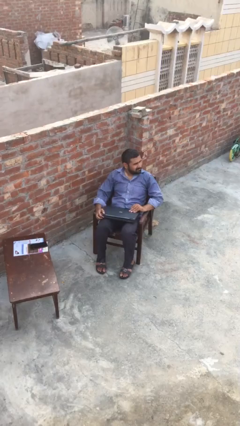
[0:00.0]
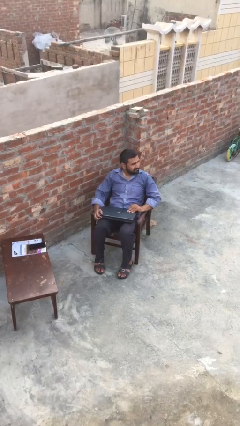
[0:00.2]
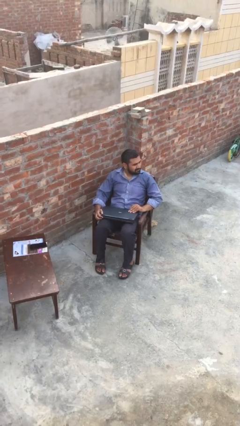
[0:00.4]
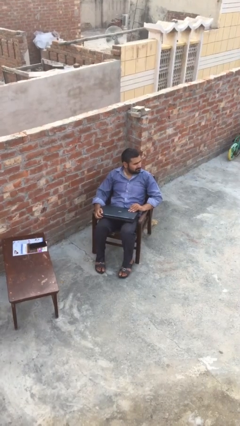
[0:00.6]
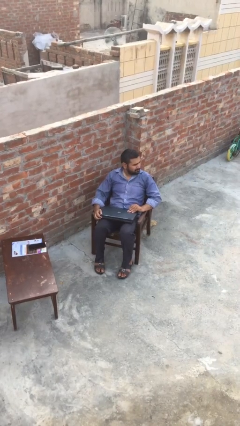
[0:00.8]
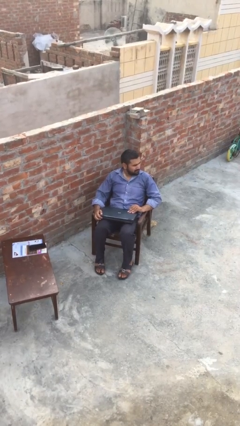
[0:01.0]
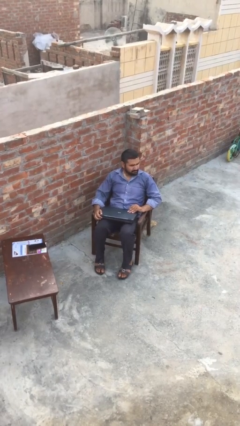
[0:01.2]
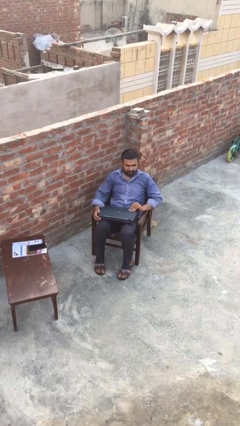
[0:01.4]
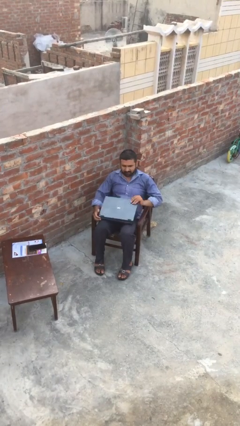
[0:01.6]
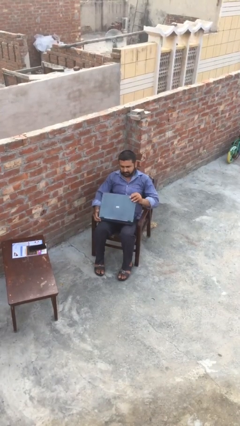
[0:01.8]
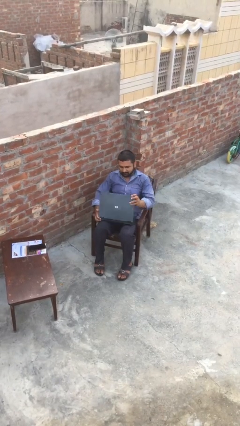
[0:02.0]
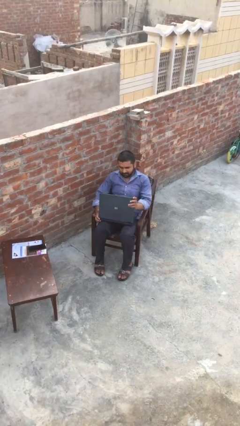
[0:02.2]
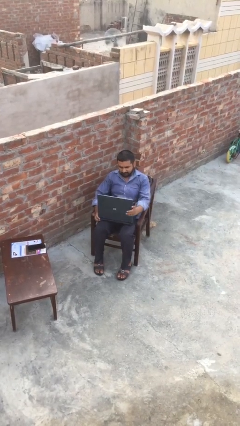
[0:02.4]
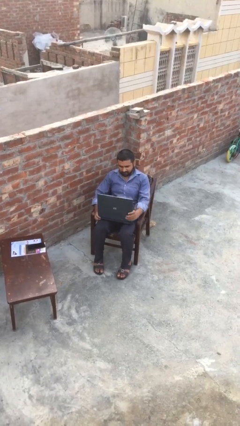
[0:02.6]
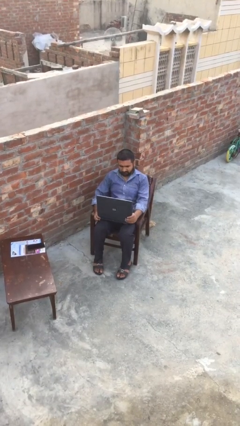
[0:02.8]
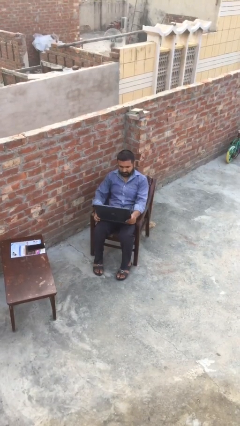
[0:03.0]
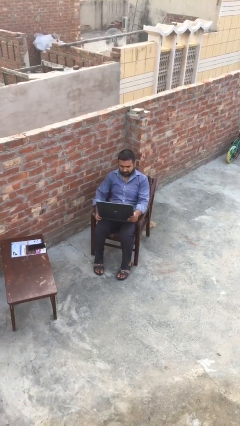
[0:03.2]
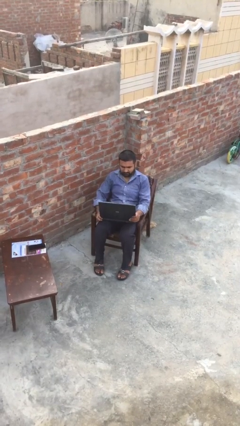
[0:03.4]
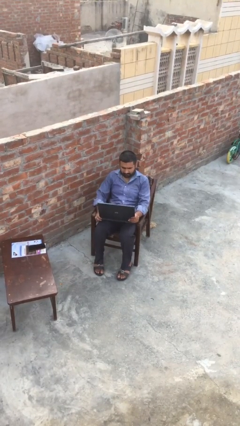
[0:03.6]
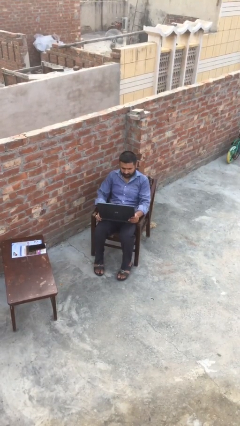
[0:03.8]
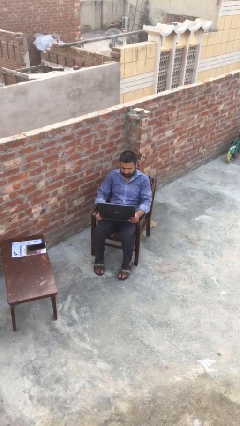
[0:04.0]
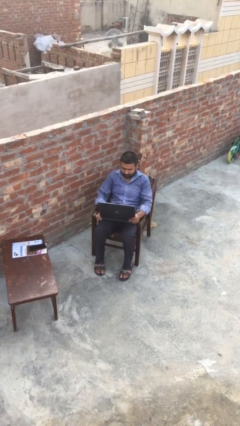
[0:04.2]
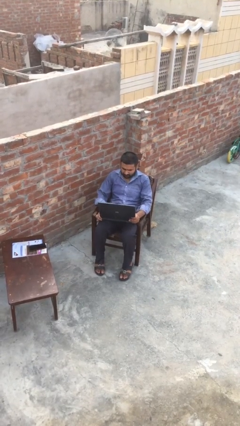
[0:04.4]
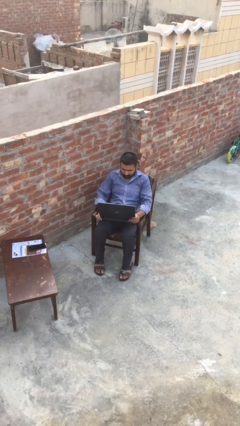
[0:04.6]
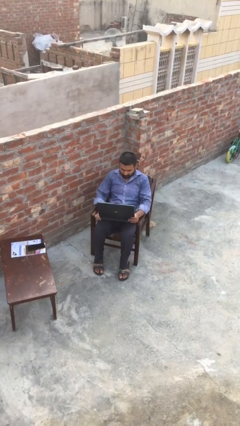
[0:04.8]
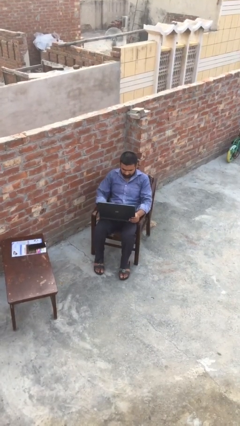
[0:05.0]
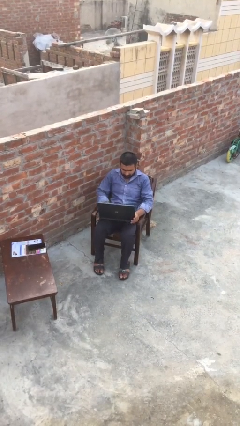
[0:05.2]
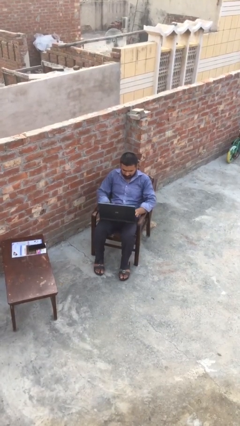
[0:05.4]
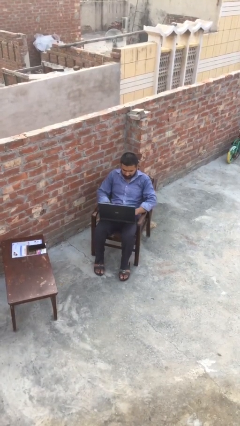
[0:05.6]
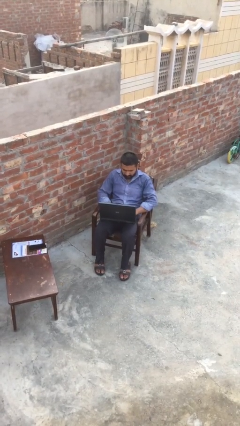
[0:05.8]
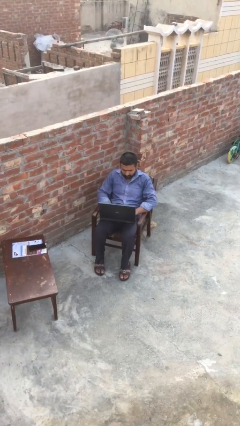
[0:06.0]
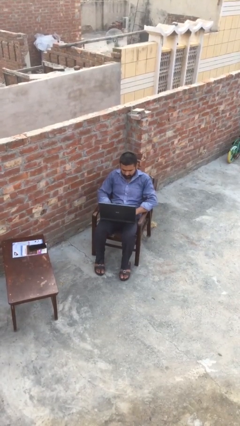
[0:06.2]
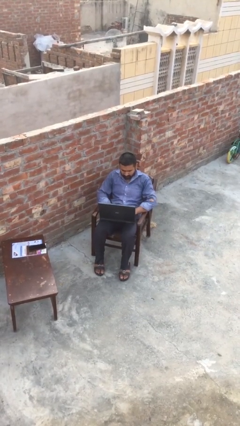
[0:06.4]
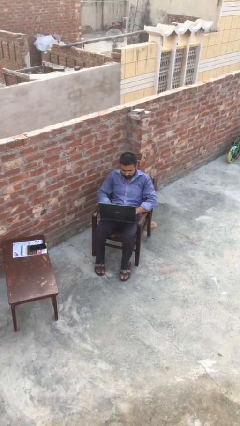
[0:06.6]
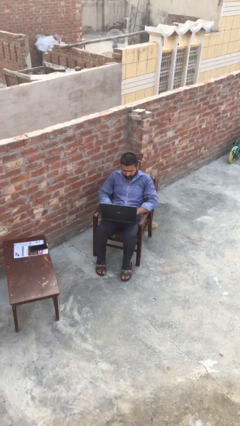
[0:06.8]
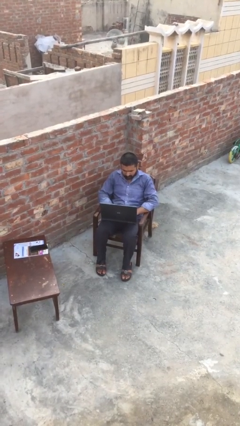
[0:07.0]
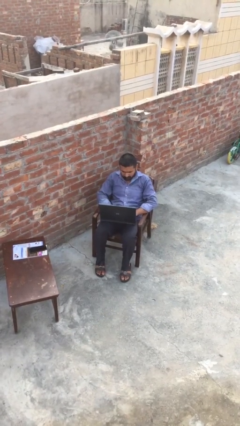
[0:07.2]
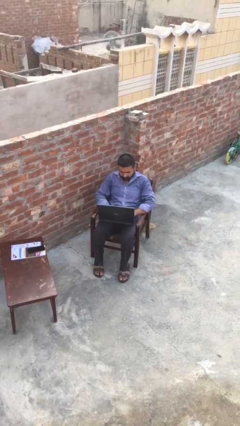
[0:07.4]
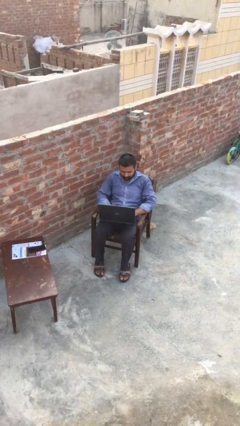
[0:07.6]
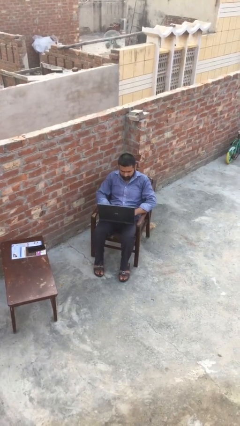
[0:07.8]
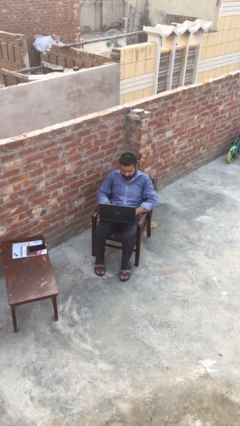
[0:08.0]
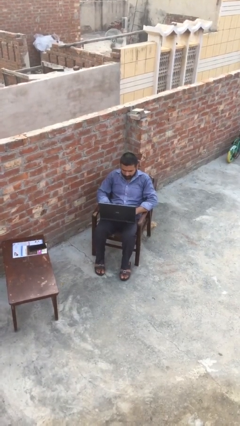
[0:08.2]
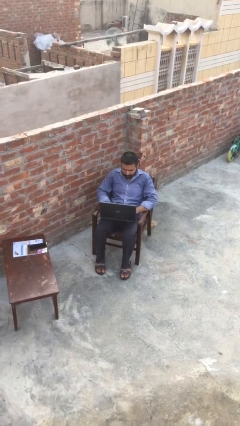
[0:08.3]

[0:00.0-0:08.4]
person interacts with laptop

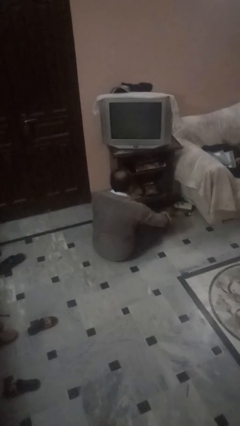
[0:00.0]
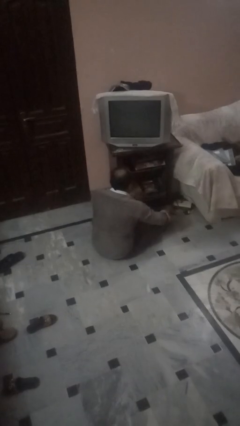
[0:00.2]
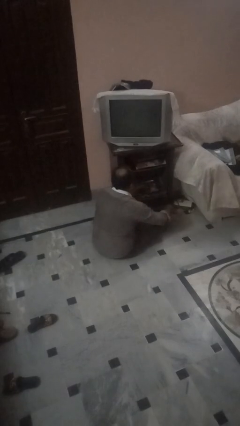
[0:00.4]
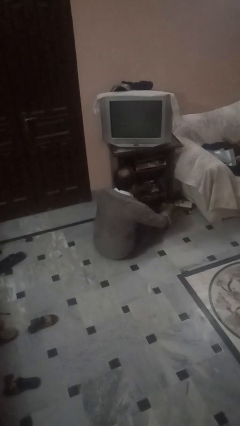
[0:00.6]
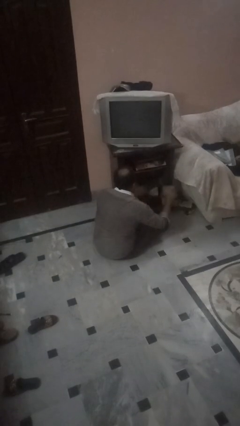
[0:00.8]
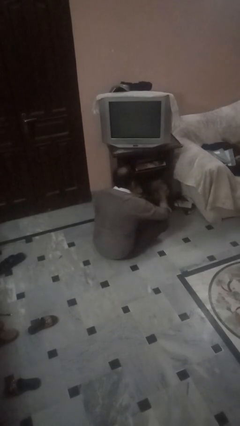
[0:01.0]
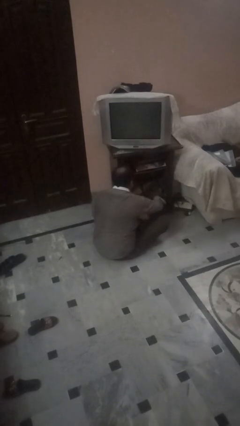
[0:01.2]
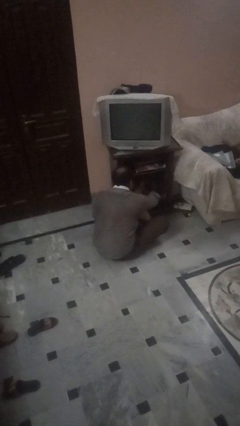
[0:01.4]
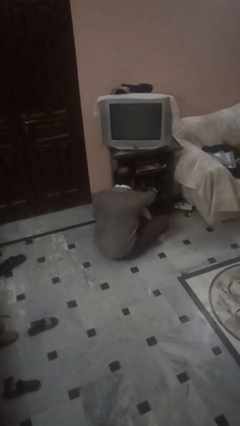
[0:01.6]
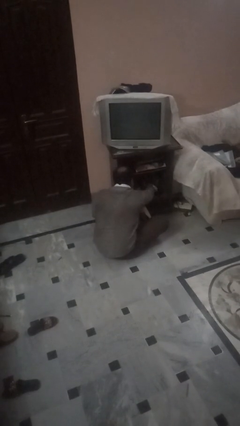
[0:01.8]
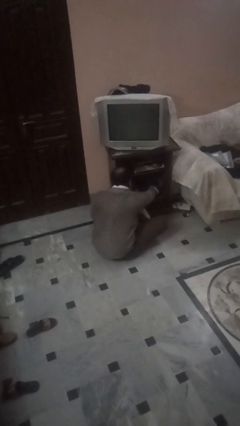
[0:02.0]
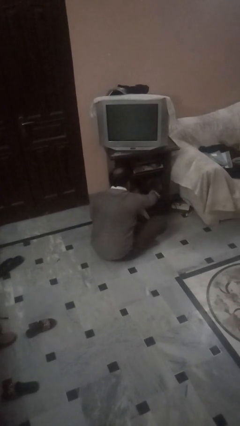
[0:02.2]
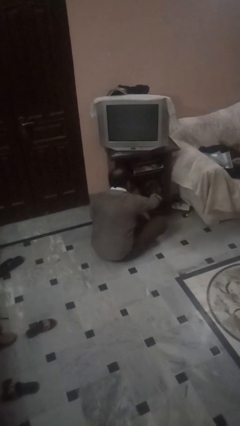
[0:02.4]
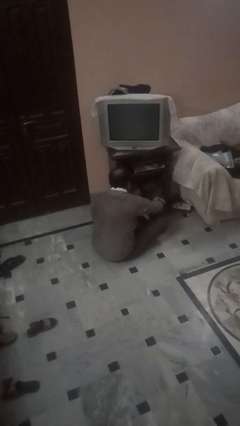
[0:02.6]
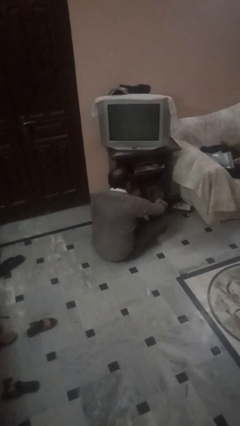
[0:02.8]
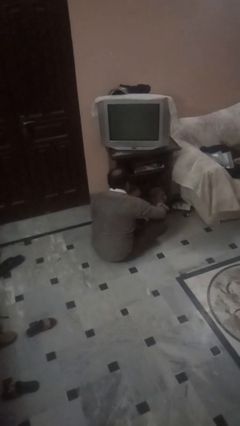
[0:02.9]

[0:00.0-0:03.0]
person dusts furniture

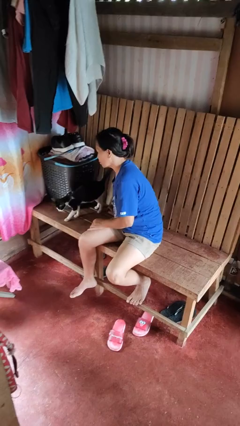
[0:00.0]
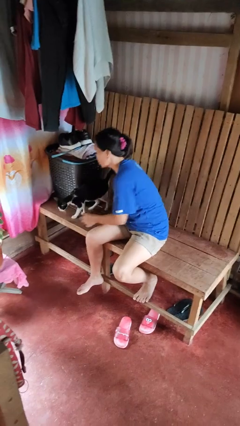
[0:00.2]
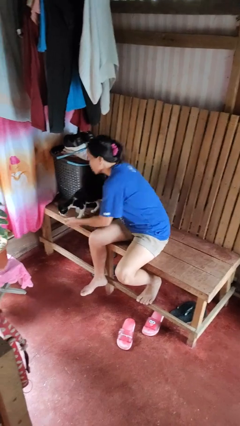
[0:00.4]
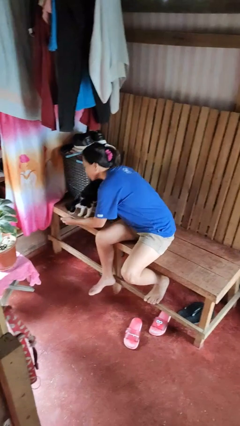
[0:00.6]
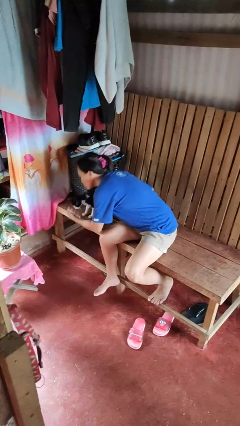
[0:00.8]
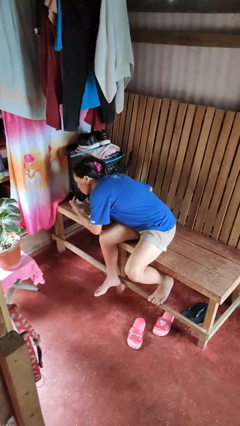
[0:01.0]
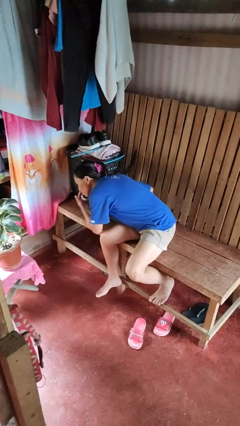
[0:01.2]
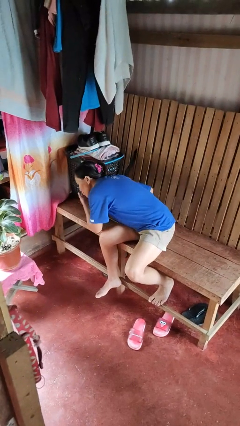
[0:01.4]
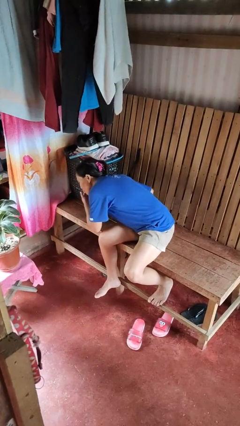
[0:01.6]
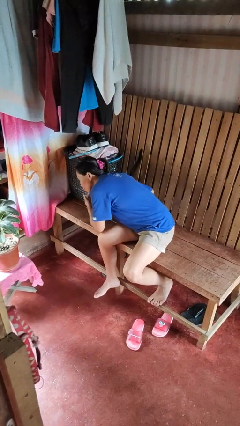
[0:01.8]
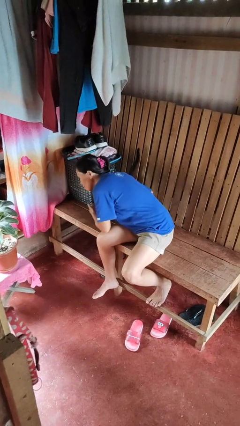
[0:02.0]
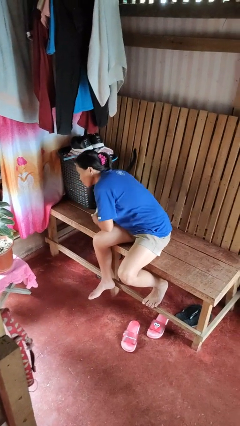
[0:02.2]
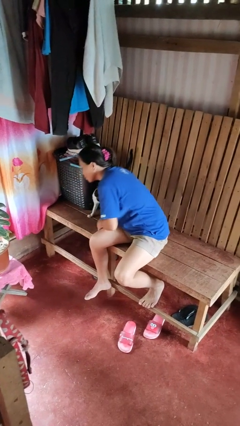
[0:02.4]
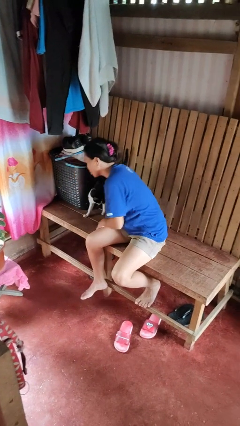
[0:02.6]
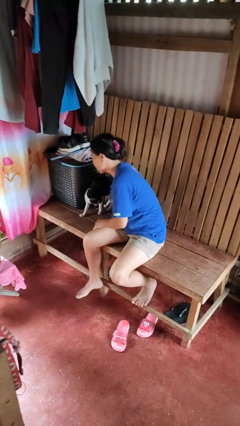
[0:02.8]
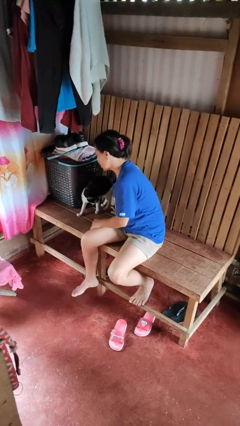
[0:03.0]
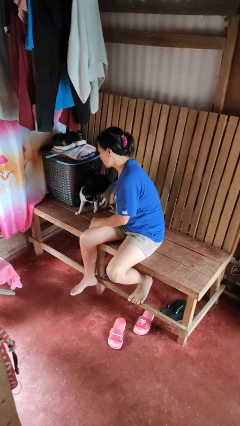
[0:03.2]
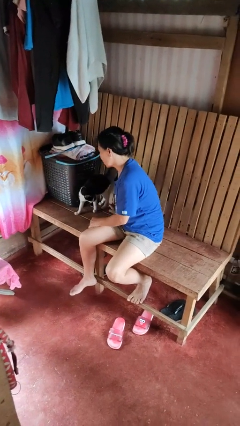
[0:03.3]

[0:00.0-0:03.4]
person hugs cat

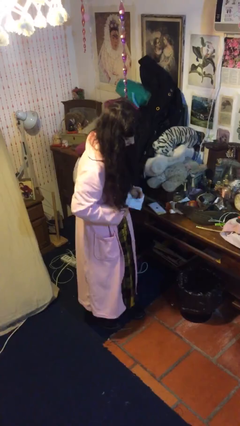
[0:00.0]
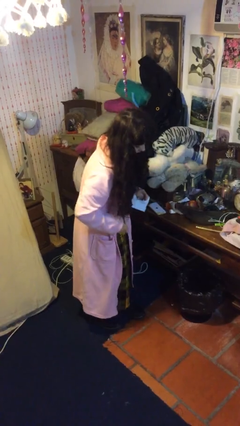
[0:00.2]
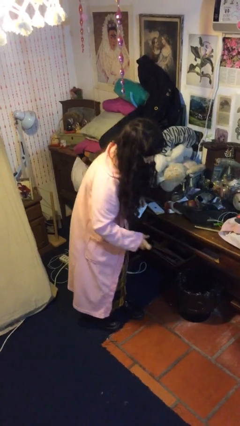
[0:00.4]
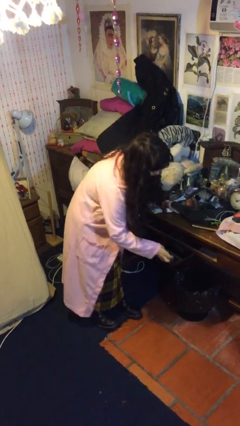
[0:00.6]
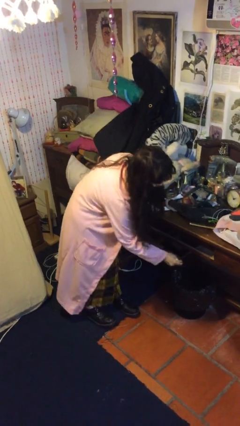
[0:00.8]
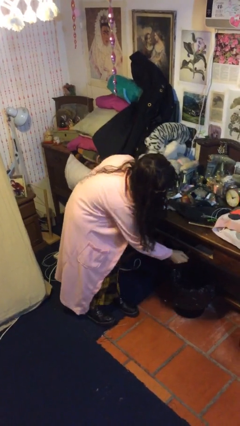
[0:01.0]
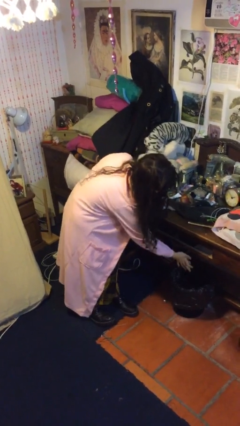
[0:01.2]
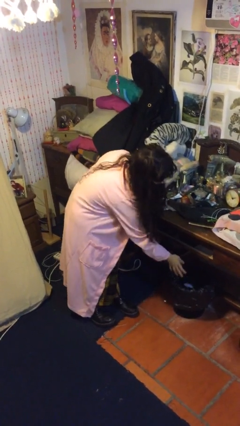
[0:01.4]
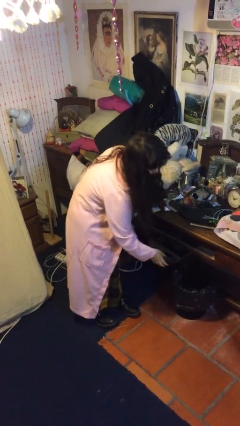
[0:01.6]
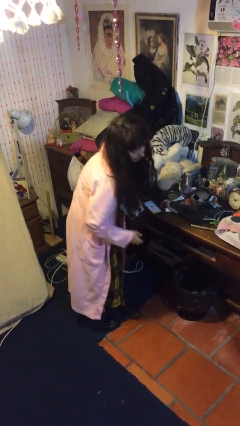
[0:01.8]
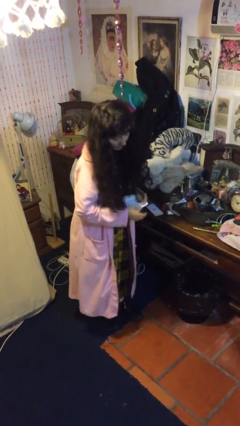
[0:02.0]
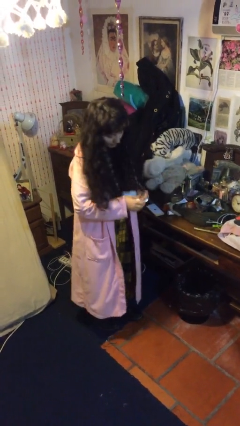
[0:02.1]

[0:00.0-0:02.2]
person discards trash

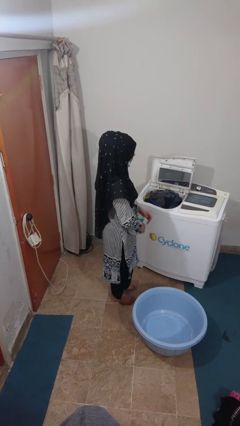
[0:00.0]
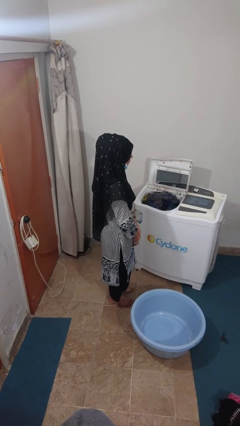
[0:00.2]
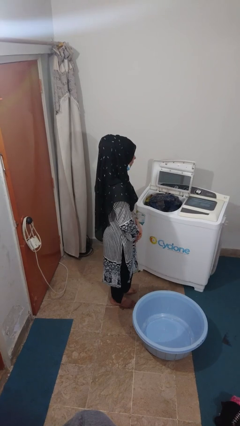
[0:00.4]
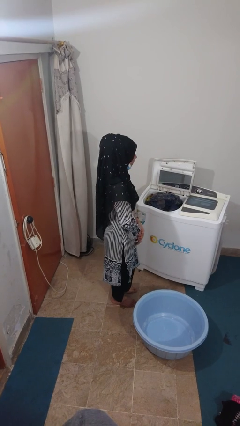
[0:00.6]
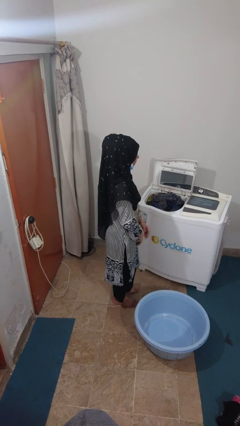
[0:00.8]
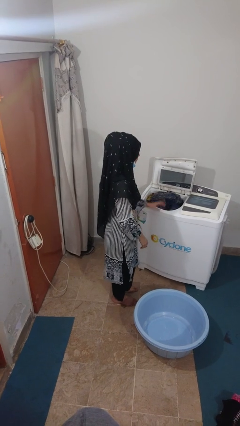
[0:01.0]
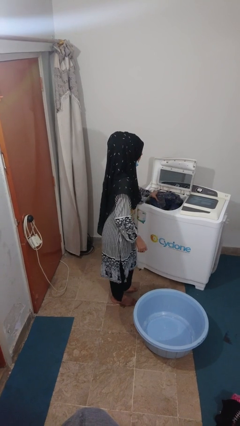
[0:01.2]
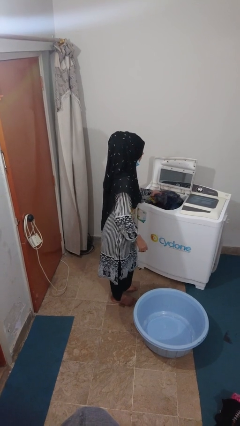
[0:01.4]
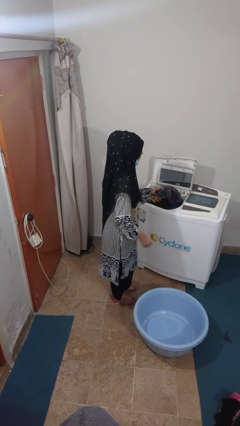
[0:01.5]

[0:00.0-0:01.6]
person loads clotheswasher
